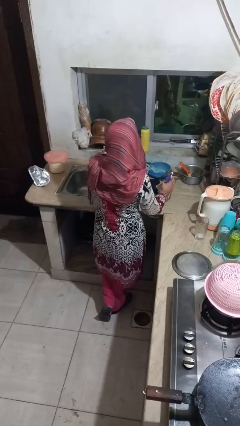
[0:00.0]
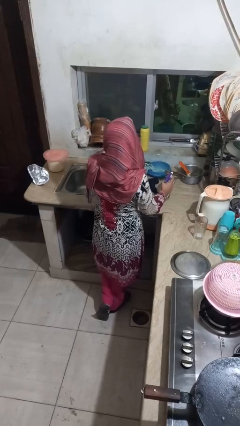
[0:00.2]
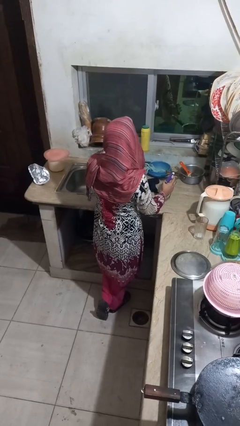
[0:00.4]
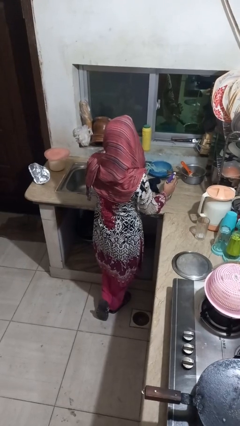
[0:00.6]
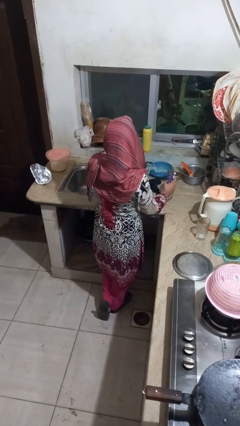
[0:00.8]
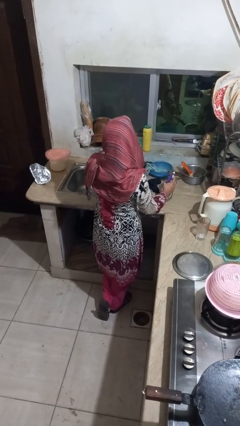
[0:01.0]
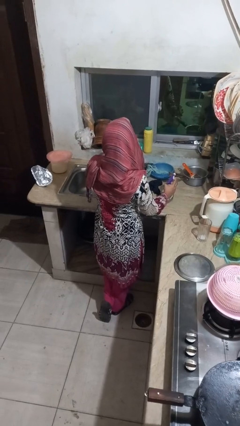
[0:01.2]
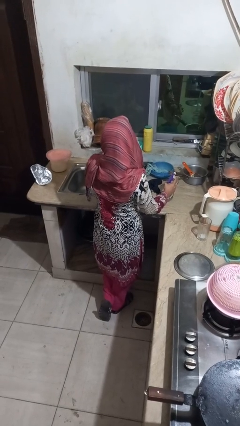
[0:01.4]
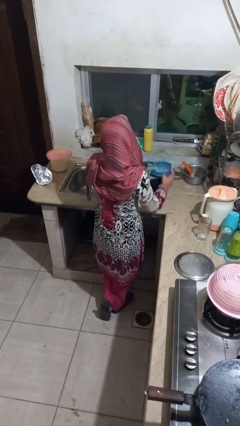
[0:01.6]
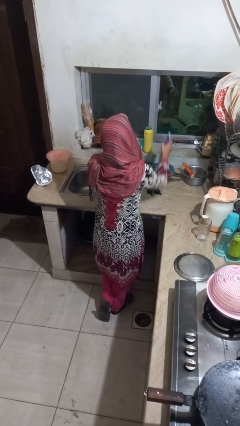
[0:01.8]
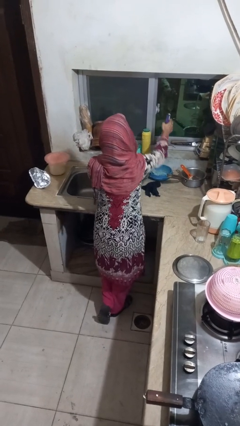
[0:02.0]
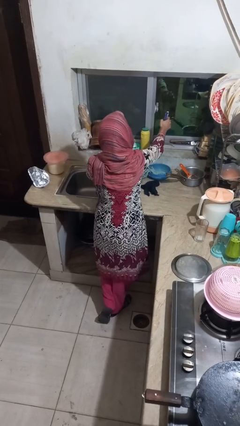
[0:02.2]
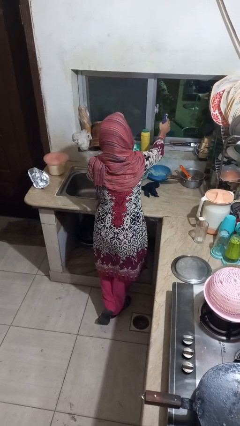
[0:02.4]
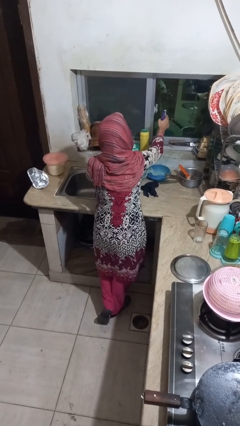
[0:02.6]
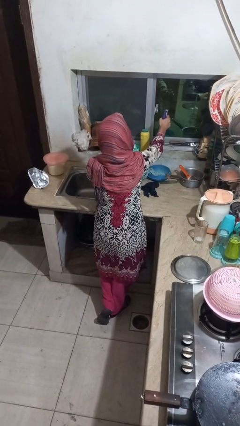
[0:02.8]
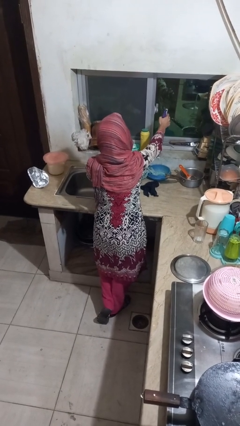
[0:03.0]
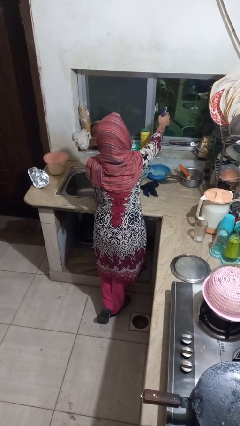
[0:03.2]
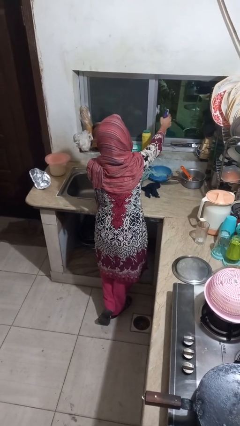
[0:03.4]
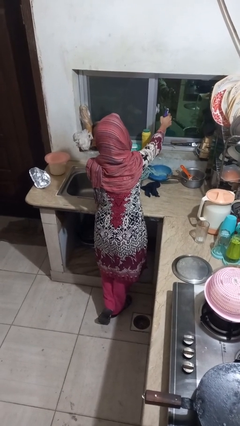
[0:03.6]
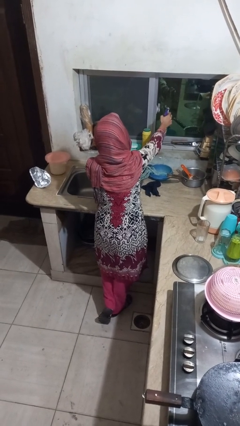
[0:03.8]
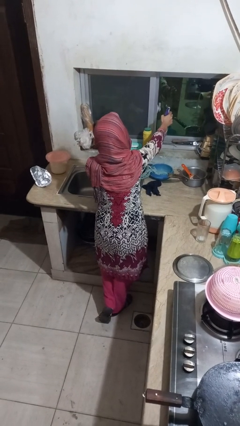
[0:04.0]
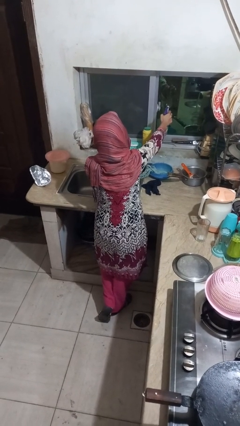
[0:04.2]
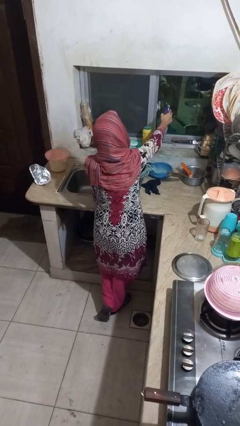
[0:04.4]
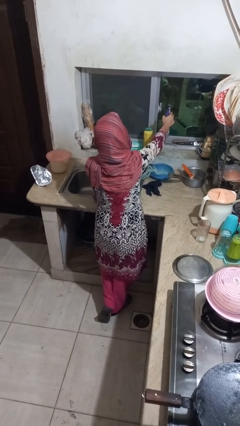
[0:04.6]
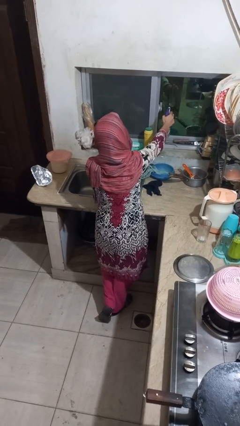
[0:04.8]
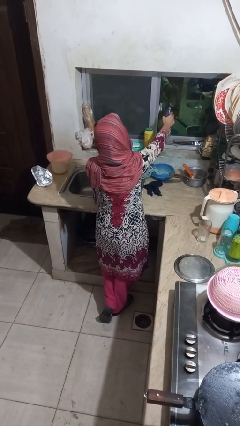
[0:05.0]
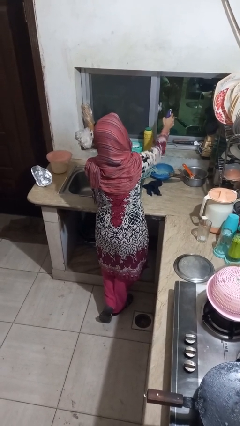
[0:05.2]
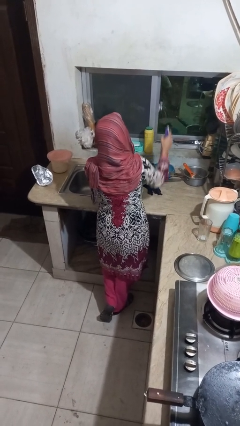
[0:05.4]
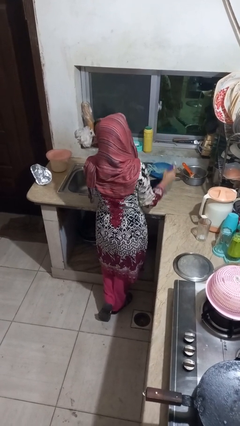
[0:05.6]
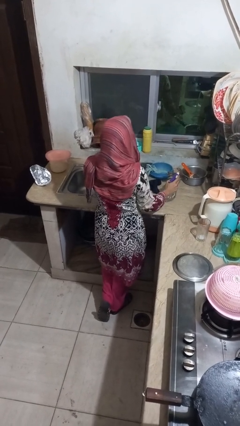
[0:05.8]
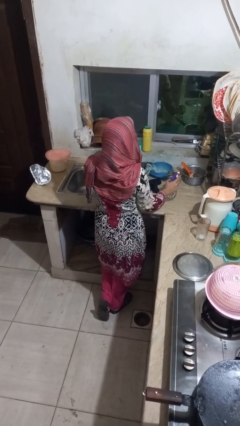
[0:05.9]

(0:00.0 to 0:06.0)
person sprays from bottle

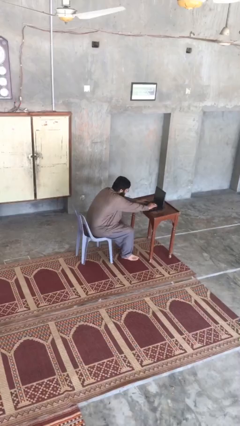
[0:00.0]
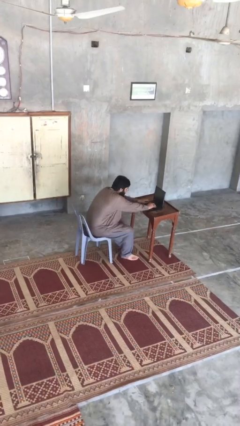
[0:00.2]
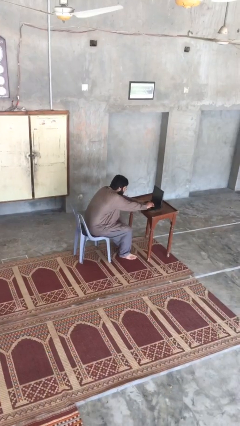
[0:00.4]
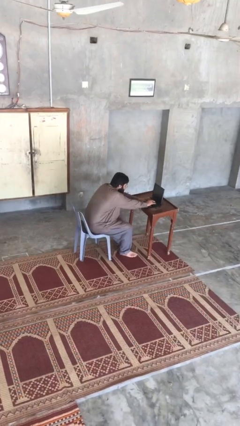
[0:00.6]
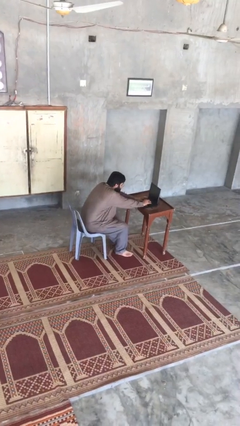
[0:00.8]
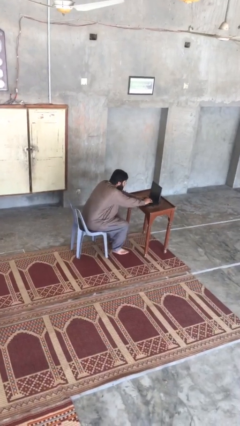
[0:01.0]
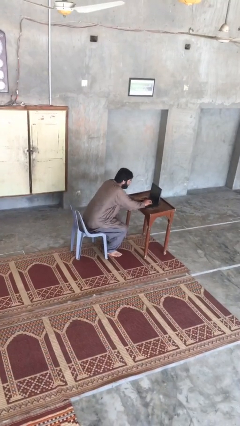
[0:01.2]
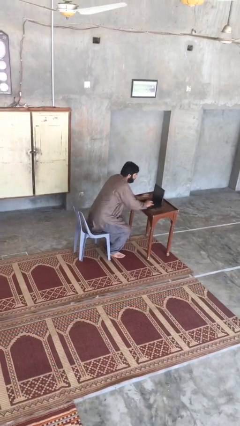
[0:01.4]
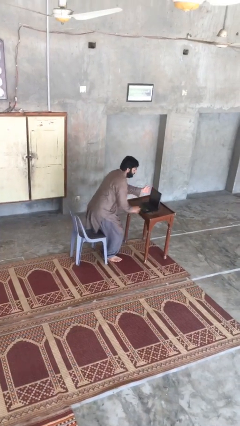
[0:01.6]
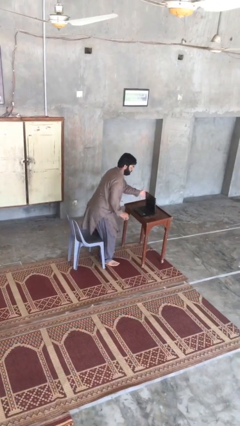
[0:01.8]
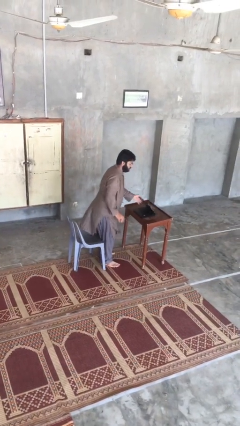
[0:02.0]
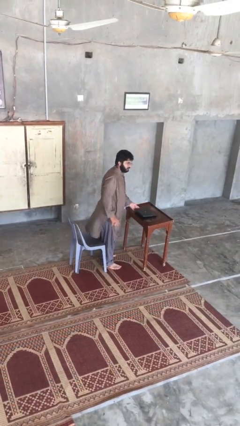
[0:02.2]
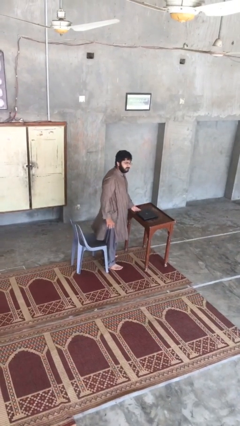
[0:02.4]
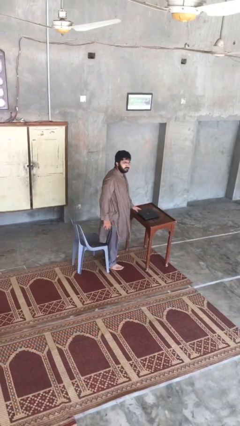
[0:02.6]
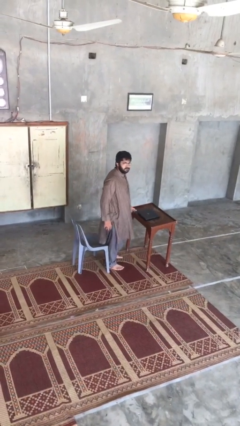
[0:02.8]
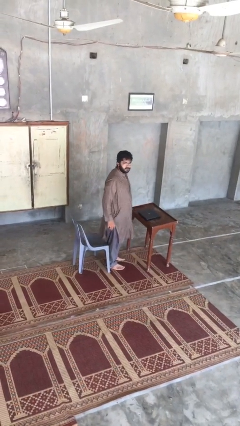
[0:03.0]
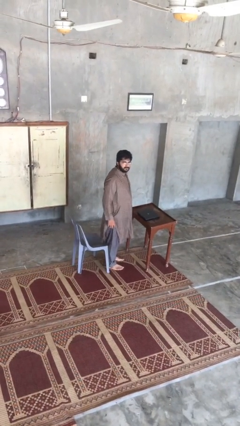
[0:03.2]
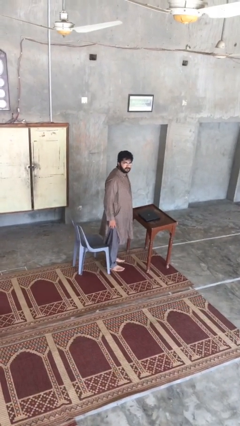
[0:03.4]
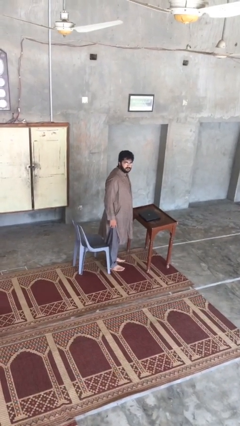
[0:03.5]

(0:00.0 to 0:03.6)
person stands up

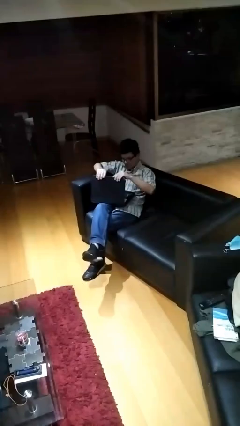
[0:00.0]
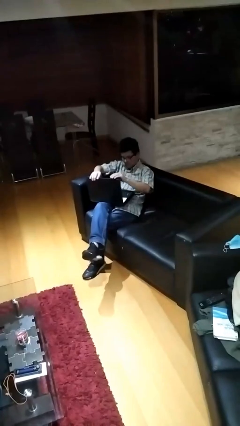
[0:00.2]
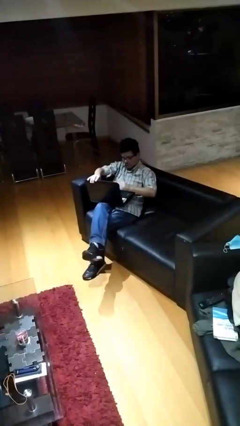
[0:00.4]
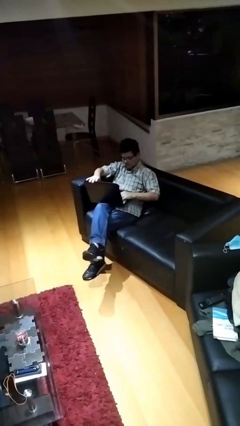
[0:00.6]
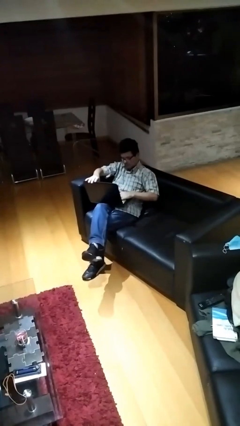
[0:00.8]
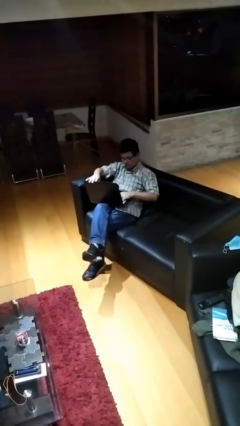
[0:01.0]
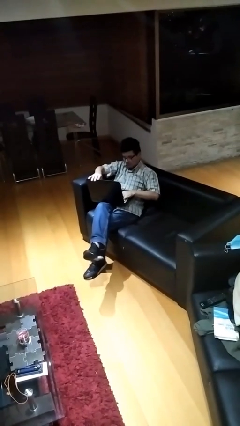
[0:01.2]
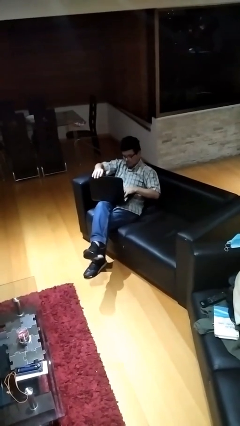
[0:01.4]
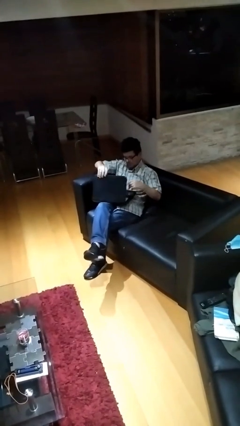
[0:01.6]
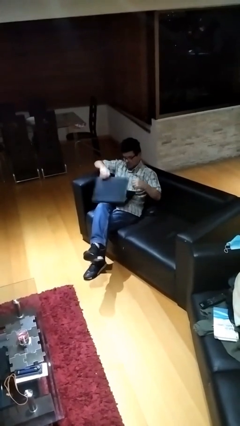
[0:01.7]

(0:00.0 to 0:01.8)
person interacts with laptop

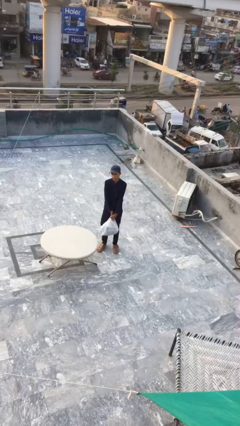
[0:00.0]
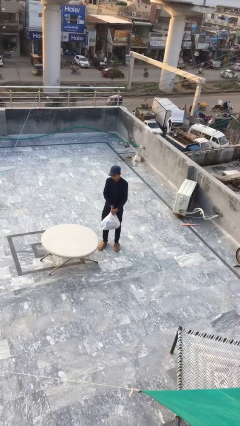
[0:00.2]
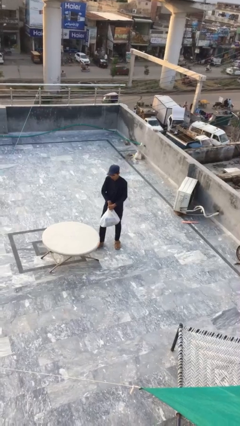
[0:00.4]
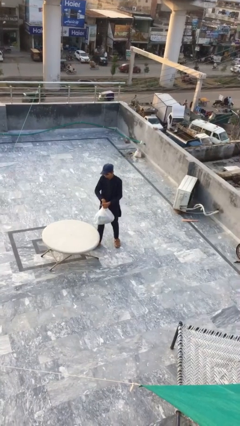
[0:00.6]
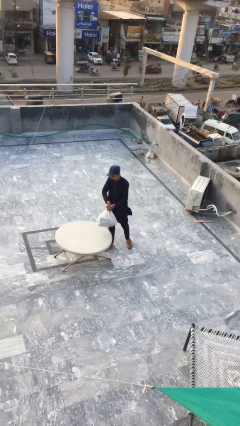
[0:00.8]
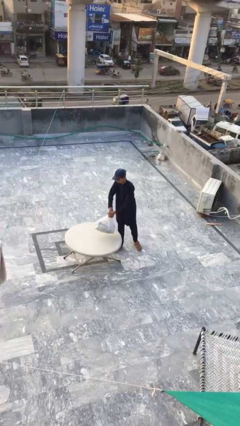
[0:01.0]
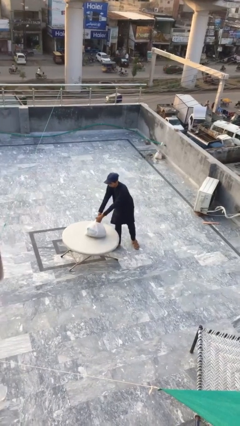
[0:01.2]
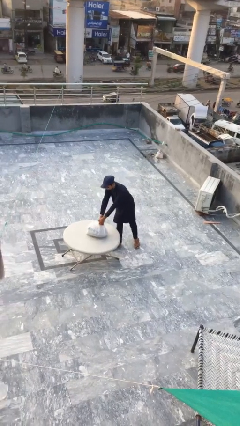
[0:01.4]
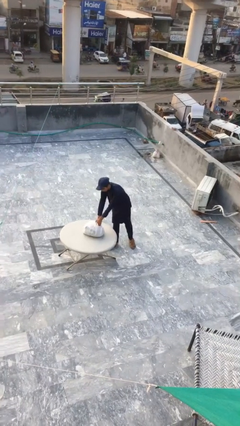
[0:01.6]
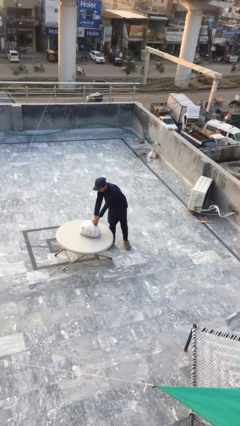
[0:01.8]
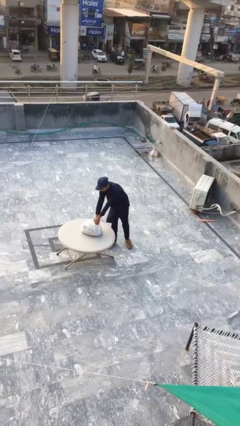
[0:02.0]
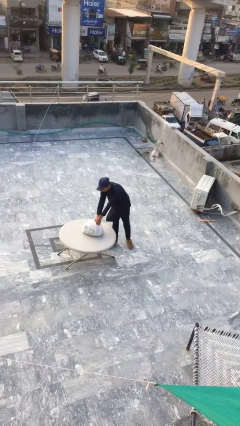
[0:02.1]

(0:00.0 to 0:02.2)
person puts down object on table

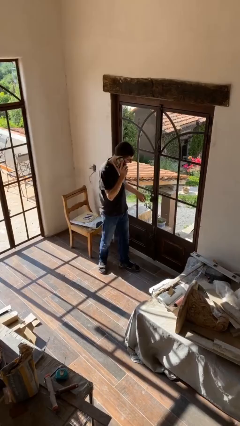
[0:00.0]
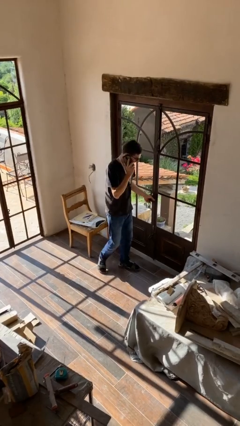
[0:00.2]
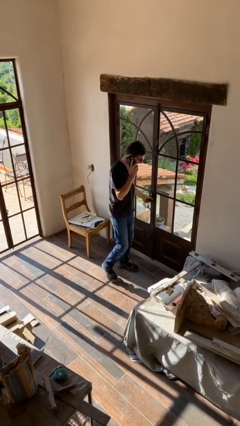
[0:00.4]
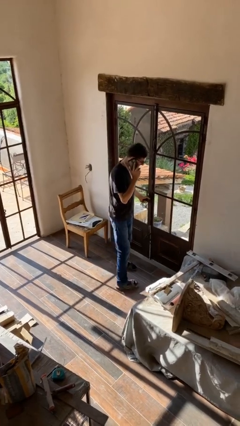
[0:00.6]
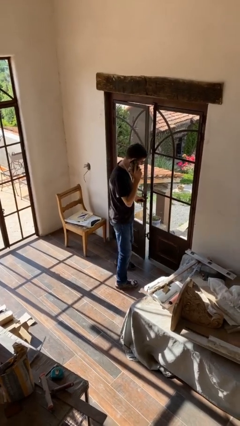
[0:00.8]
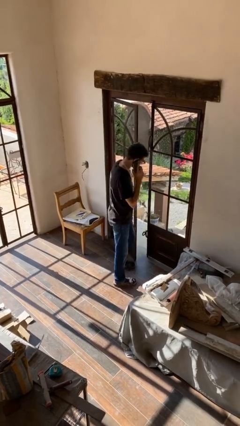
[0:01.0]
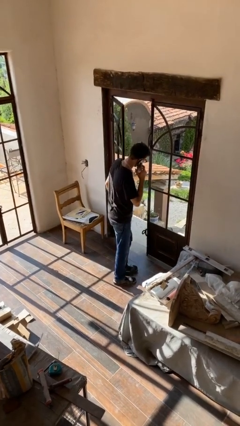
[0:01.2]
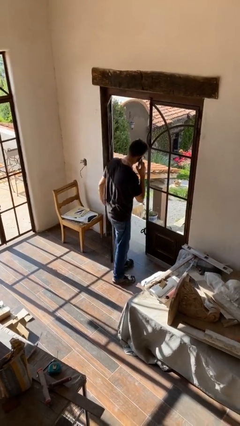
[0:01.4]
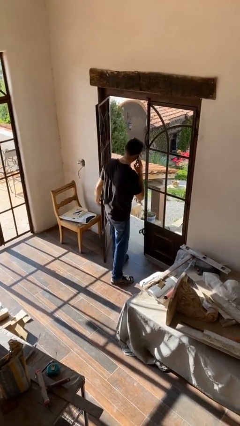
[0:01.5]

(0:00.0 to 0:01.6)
person opens facility door

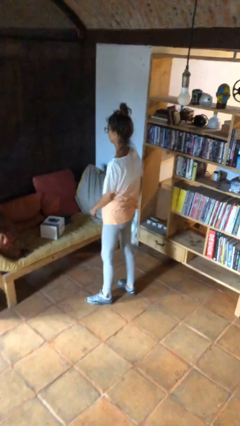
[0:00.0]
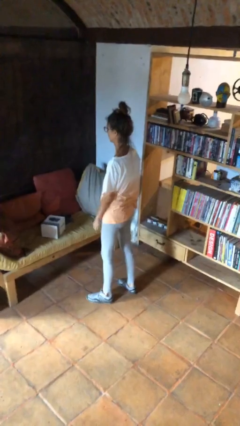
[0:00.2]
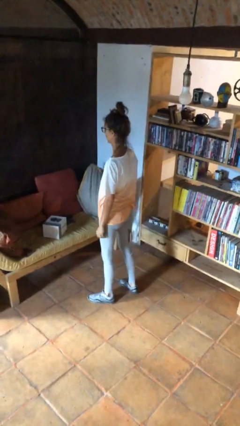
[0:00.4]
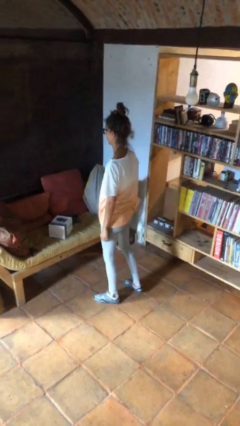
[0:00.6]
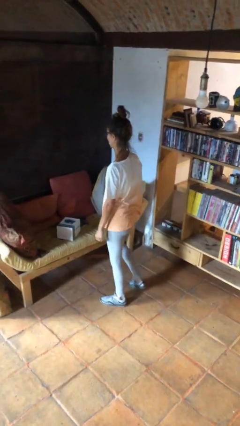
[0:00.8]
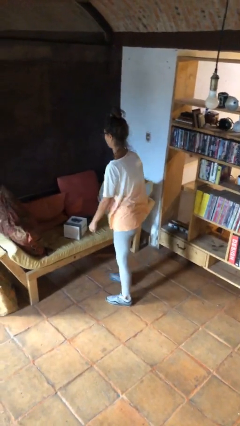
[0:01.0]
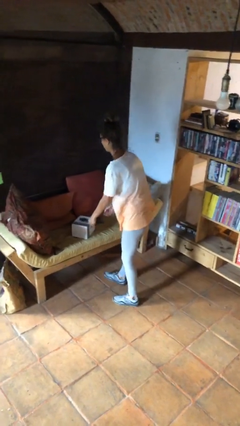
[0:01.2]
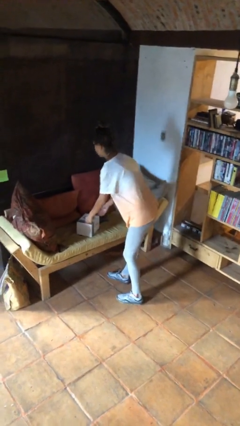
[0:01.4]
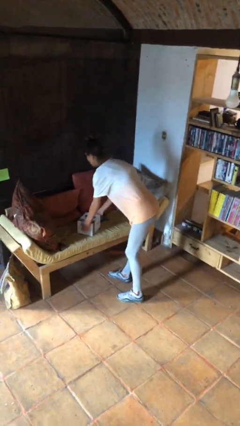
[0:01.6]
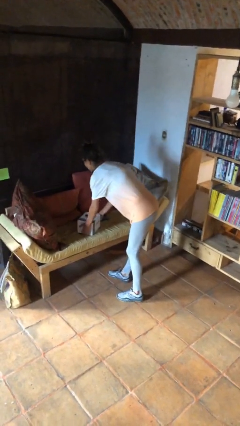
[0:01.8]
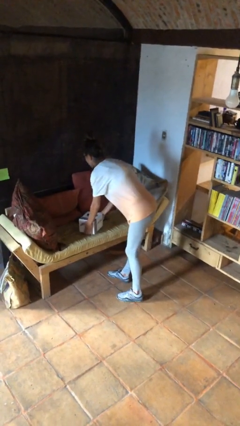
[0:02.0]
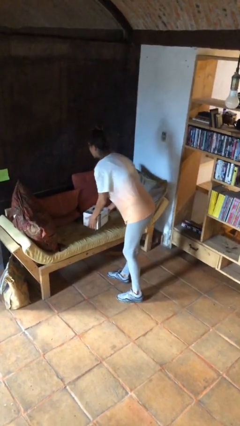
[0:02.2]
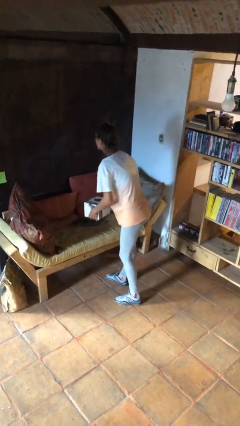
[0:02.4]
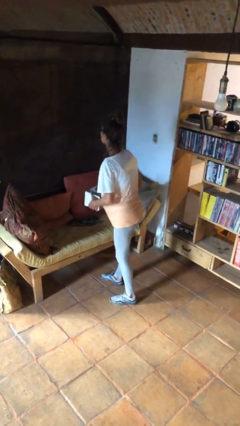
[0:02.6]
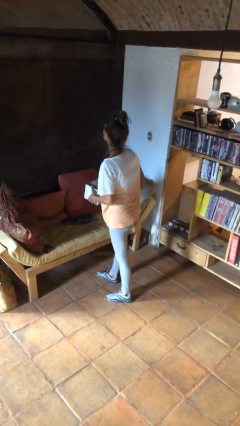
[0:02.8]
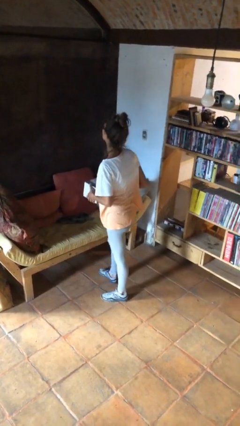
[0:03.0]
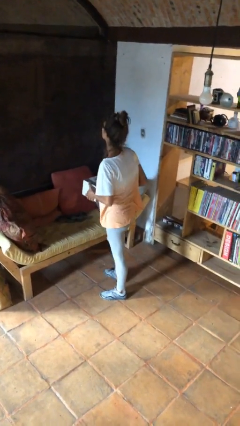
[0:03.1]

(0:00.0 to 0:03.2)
person picks up object from couch
